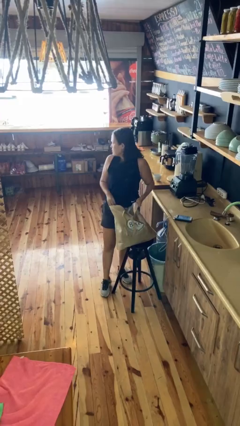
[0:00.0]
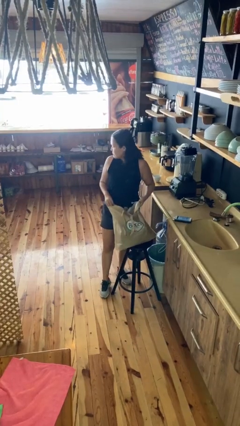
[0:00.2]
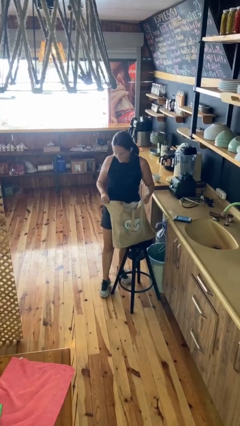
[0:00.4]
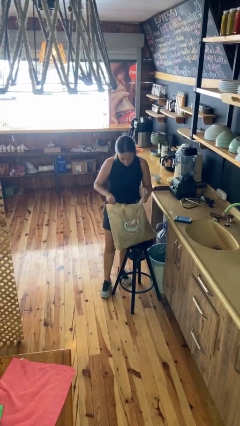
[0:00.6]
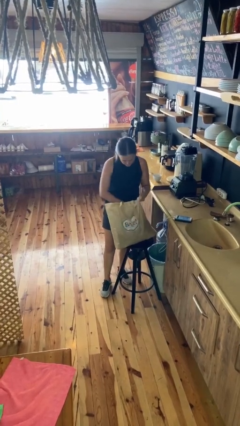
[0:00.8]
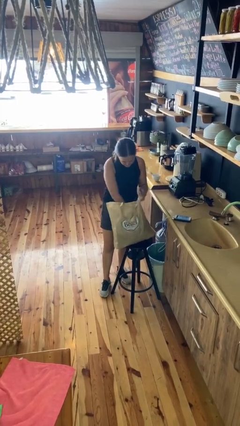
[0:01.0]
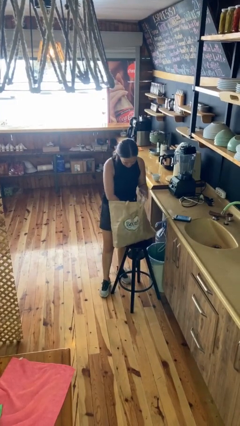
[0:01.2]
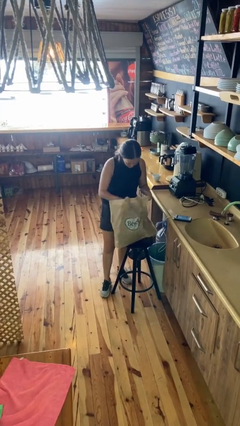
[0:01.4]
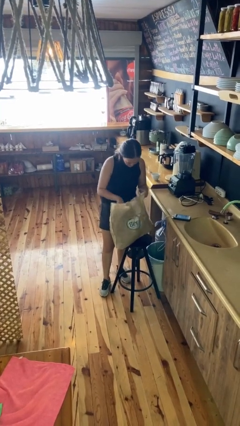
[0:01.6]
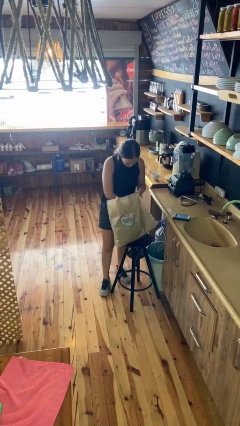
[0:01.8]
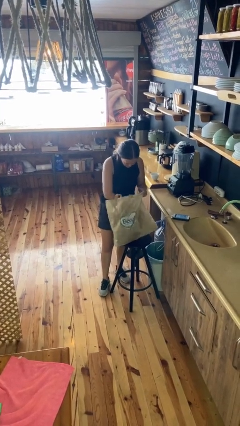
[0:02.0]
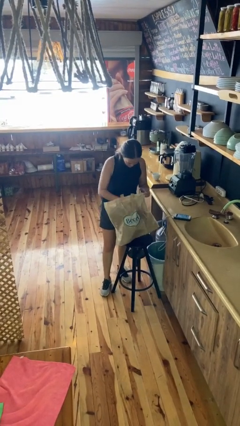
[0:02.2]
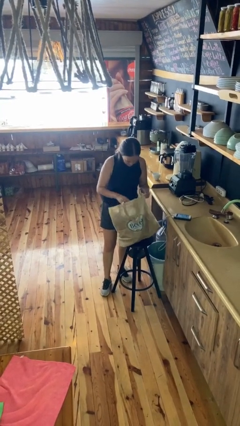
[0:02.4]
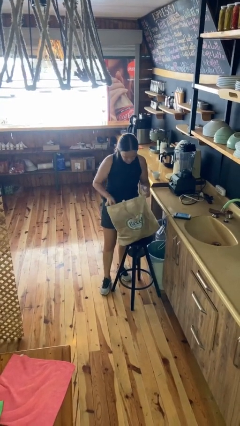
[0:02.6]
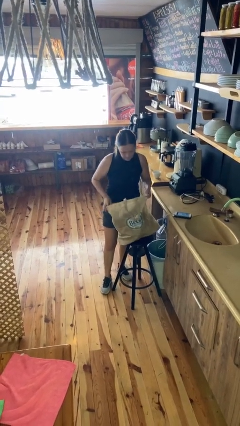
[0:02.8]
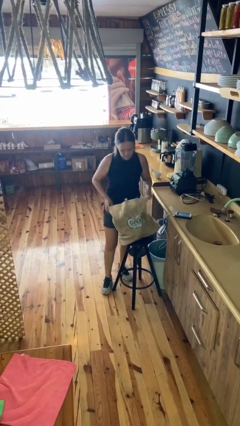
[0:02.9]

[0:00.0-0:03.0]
person searches in bag

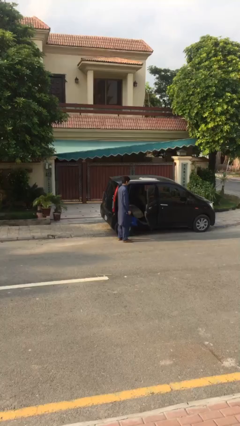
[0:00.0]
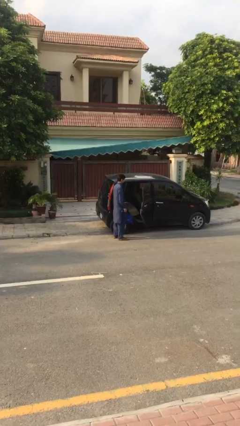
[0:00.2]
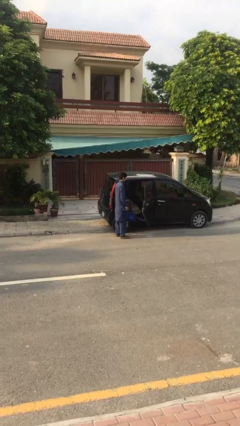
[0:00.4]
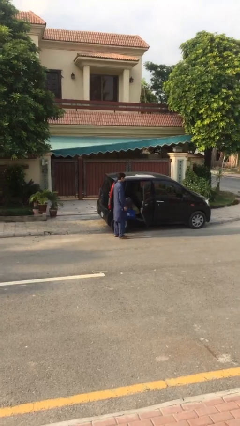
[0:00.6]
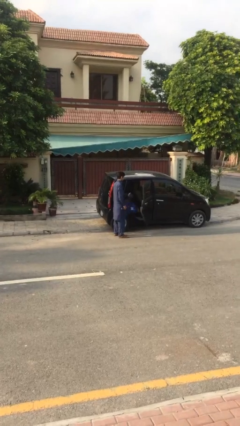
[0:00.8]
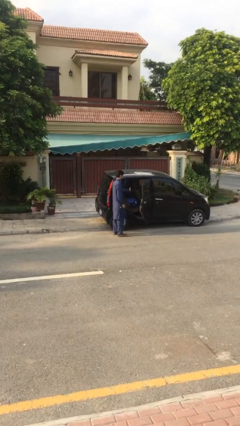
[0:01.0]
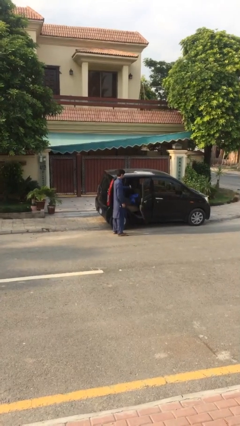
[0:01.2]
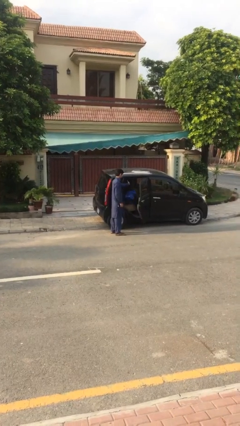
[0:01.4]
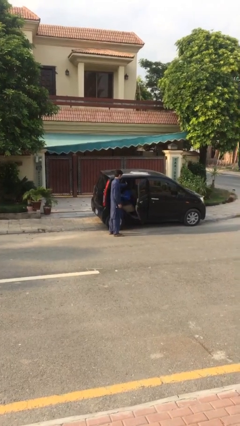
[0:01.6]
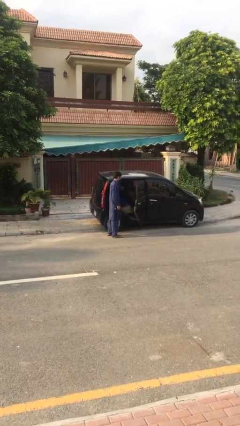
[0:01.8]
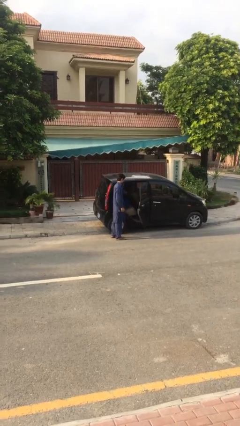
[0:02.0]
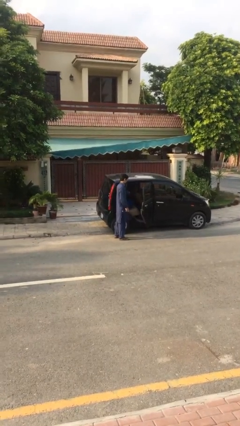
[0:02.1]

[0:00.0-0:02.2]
person loads car

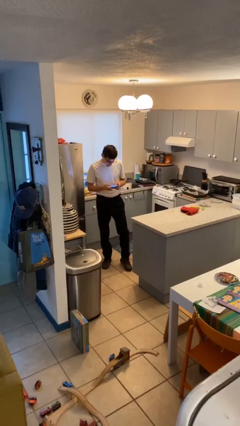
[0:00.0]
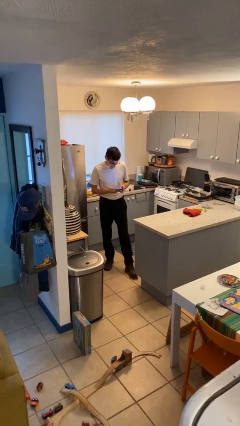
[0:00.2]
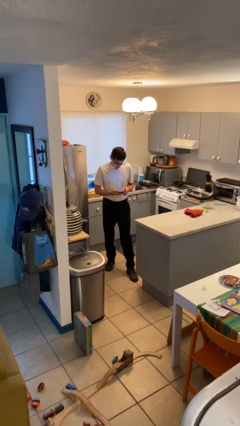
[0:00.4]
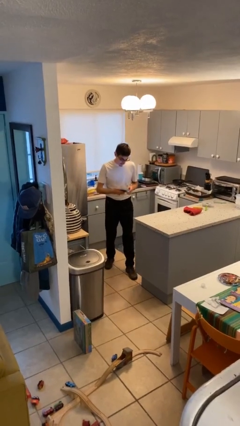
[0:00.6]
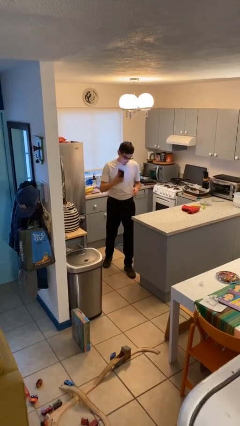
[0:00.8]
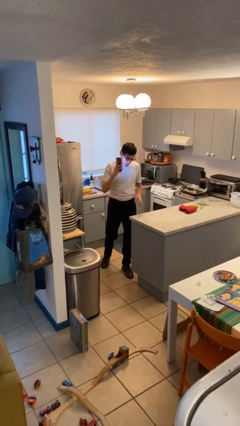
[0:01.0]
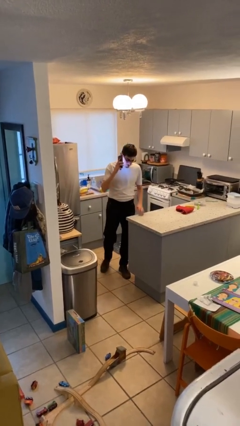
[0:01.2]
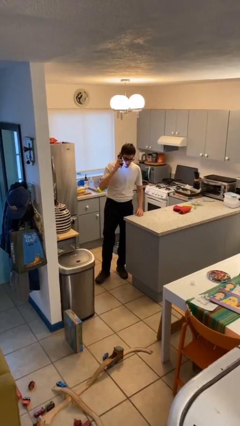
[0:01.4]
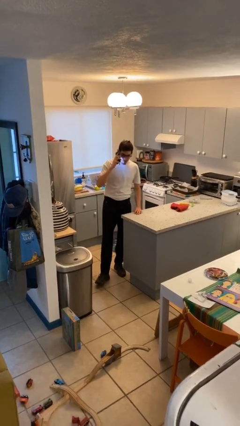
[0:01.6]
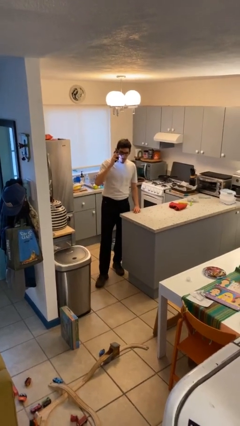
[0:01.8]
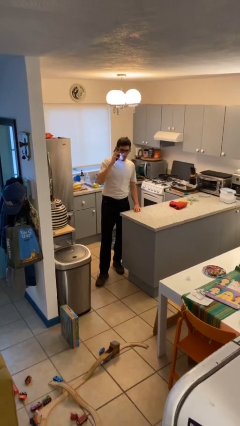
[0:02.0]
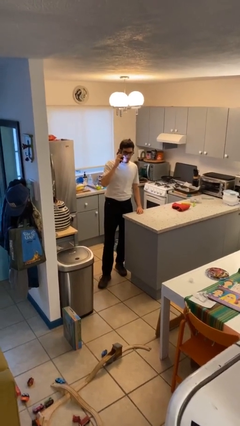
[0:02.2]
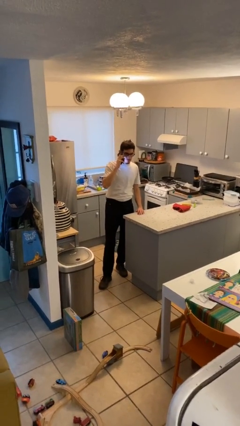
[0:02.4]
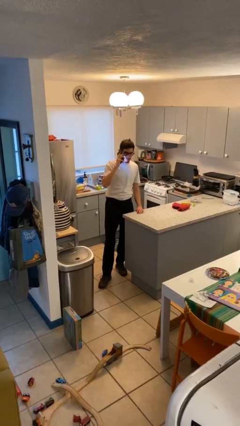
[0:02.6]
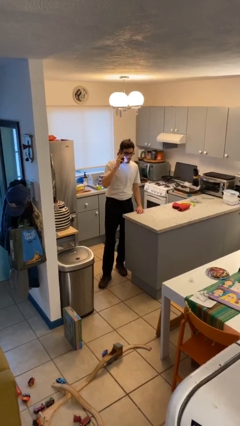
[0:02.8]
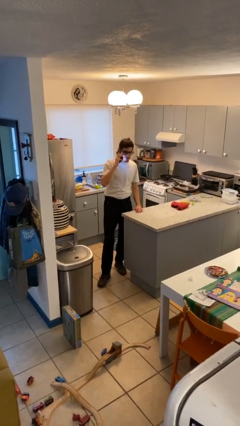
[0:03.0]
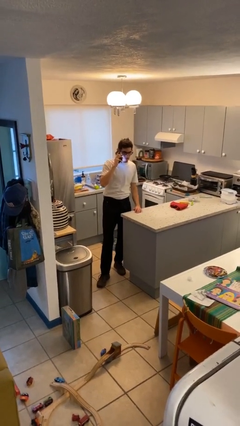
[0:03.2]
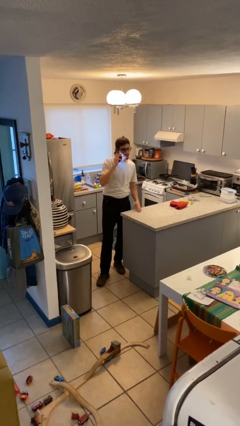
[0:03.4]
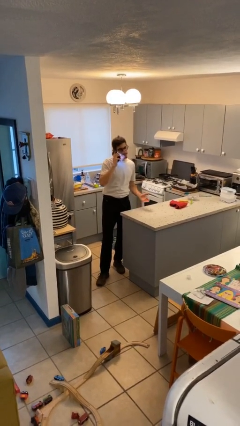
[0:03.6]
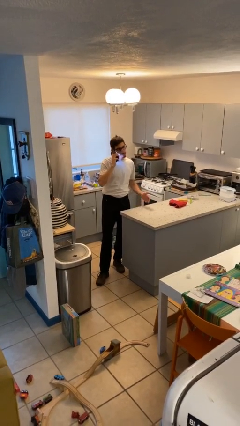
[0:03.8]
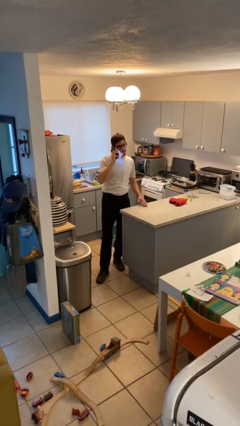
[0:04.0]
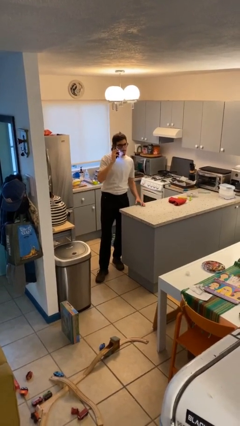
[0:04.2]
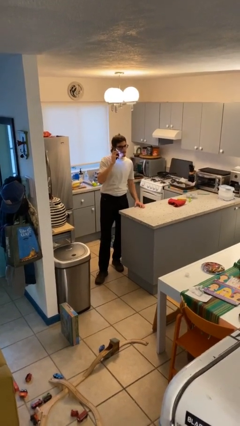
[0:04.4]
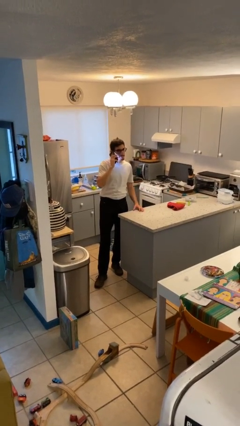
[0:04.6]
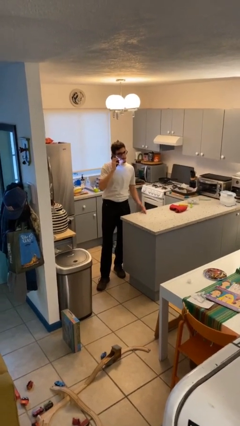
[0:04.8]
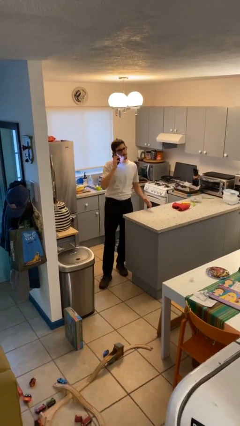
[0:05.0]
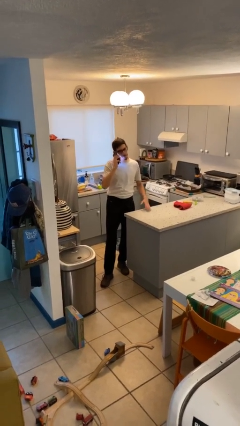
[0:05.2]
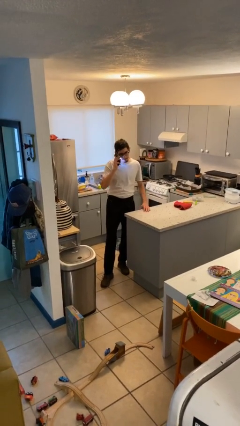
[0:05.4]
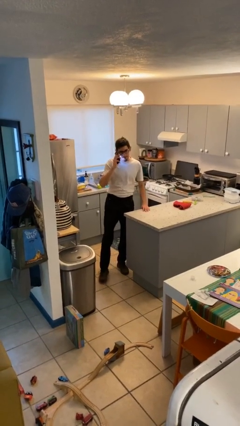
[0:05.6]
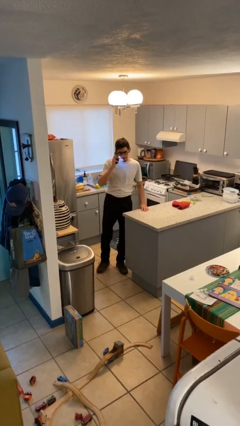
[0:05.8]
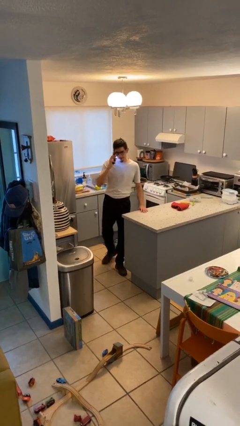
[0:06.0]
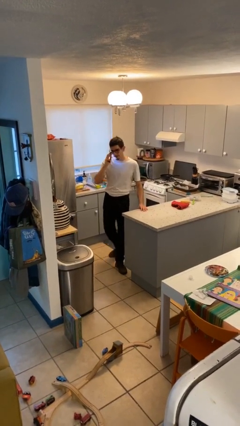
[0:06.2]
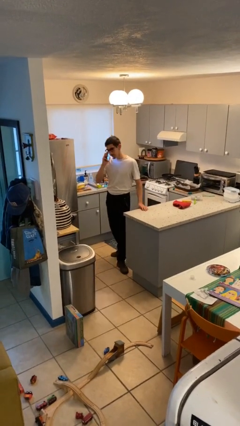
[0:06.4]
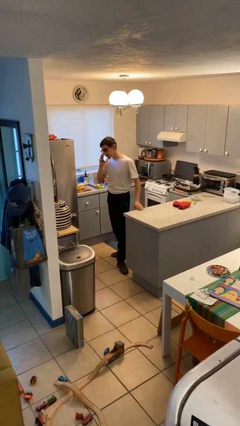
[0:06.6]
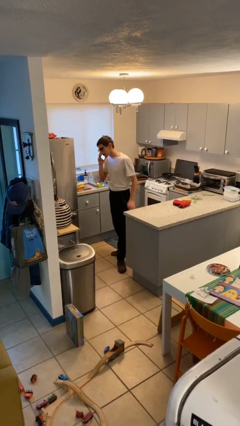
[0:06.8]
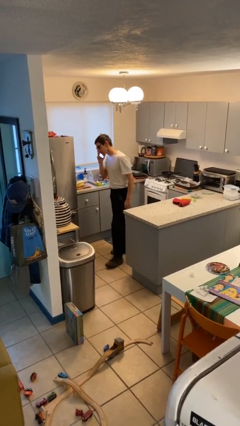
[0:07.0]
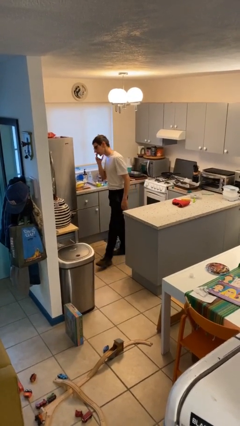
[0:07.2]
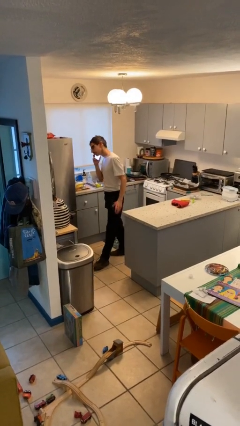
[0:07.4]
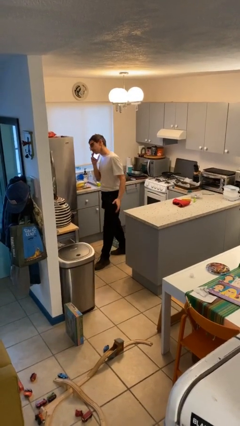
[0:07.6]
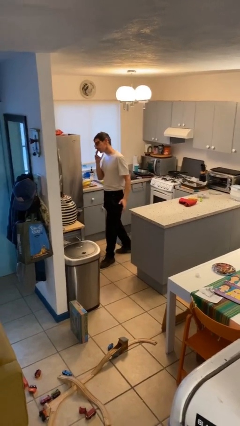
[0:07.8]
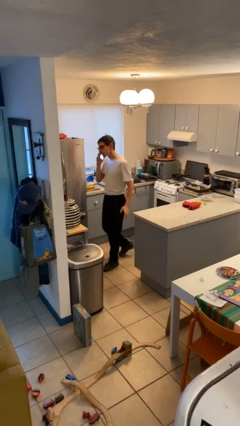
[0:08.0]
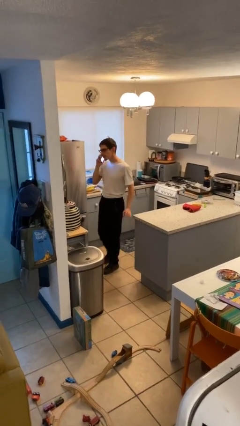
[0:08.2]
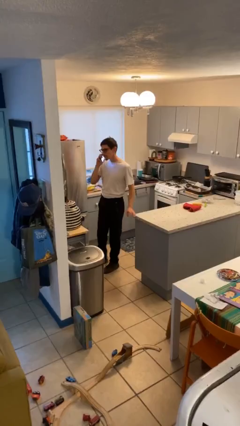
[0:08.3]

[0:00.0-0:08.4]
person talks on phone

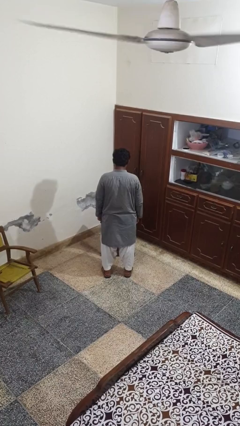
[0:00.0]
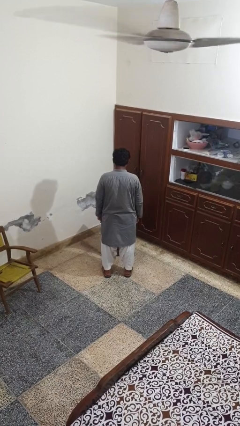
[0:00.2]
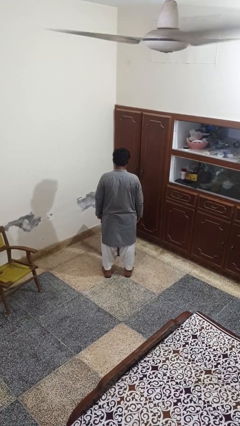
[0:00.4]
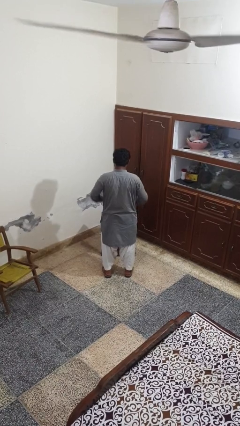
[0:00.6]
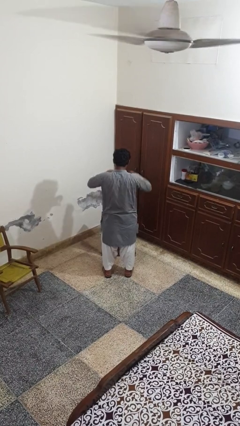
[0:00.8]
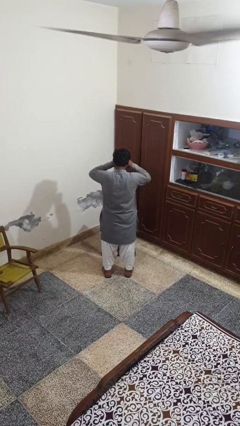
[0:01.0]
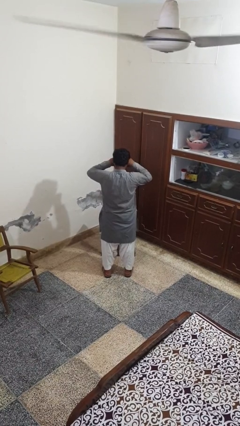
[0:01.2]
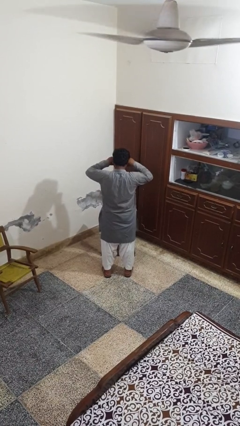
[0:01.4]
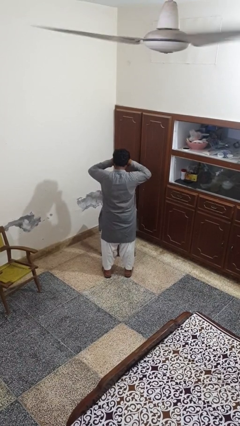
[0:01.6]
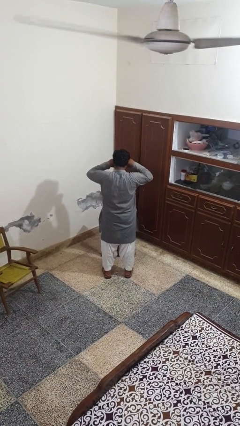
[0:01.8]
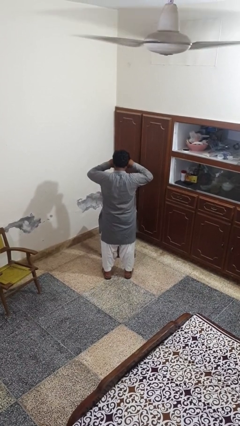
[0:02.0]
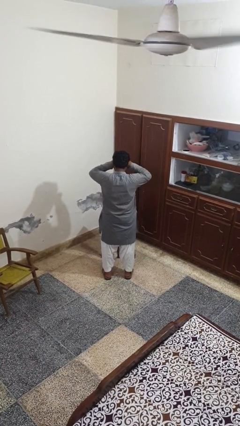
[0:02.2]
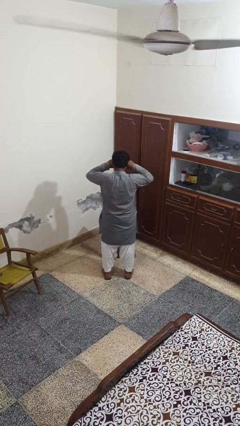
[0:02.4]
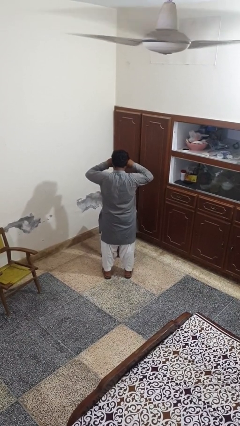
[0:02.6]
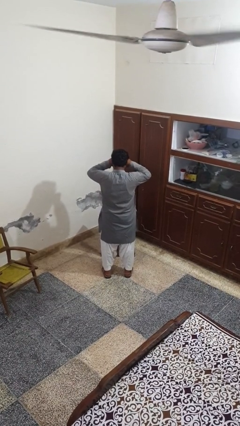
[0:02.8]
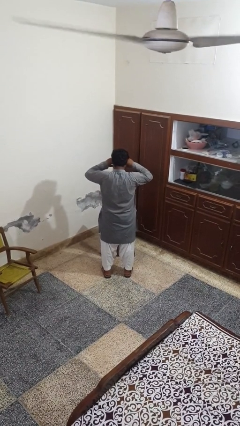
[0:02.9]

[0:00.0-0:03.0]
person rubs eyes

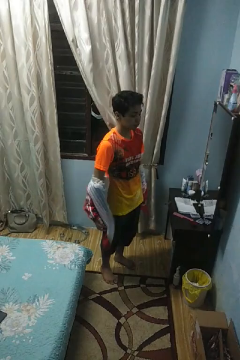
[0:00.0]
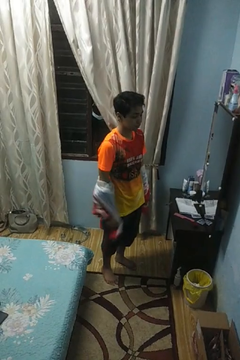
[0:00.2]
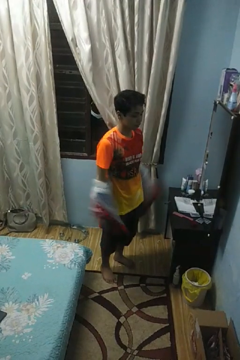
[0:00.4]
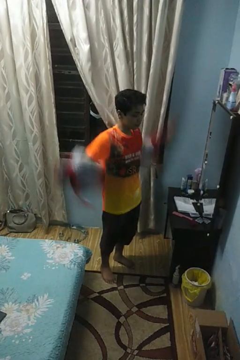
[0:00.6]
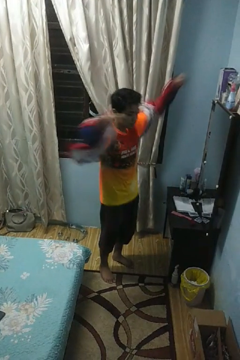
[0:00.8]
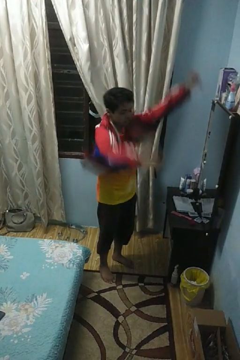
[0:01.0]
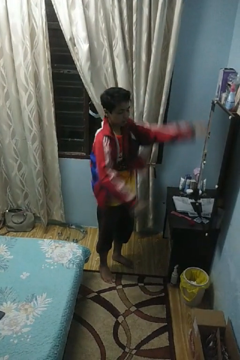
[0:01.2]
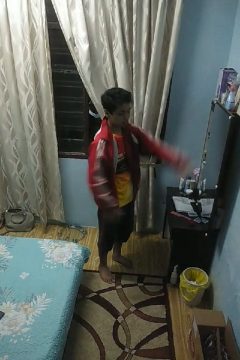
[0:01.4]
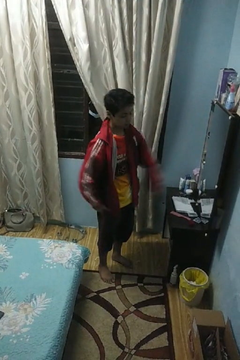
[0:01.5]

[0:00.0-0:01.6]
person puts on jacket
